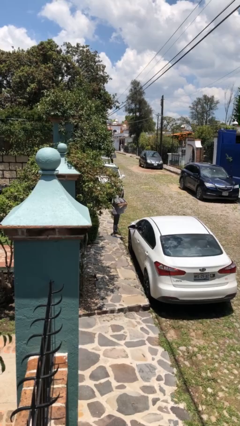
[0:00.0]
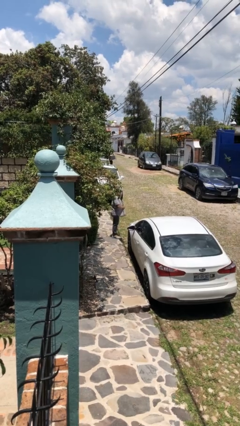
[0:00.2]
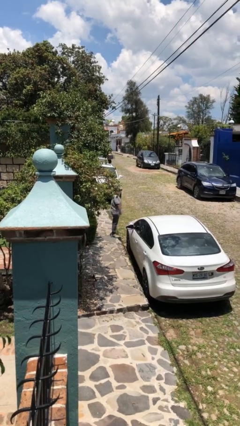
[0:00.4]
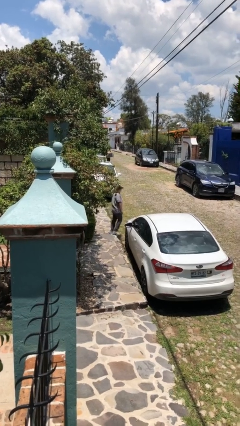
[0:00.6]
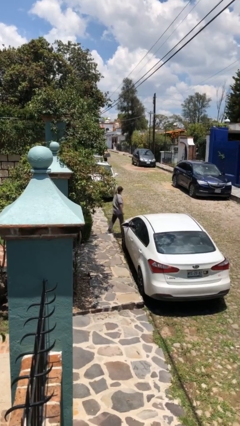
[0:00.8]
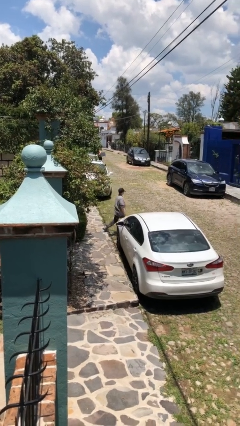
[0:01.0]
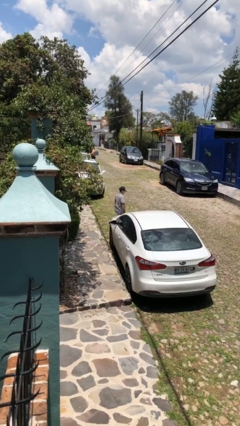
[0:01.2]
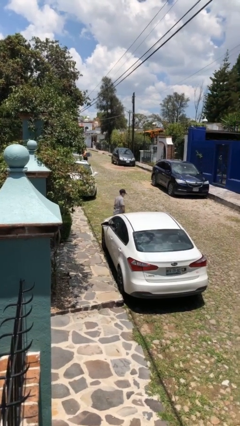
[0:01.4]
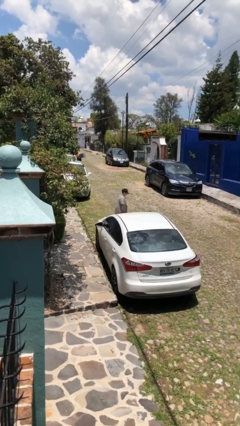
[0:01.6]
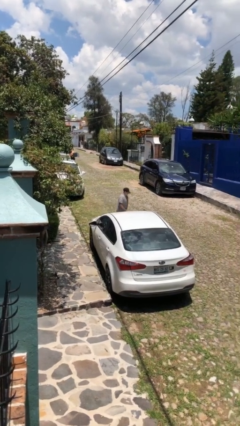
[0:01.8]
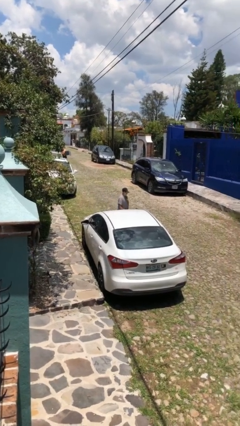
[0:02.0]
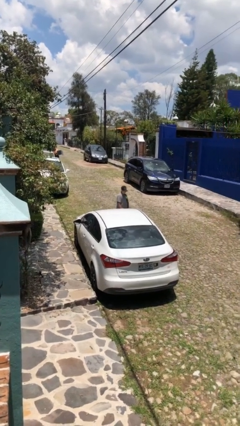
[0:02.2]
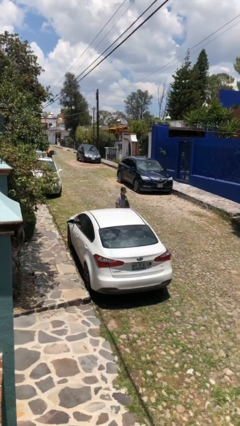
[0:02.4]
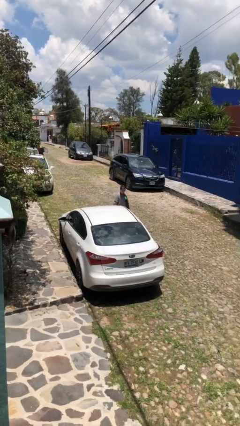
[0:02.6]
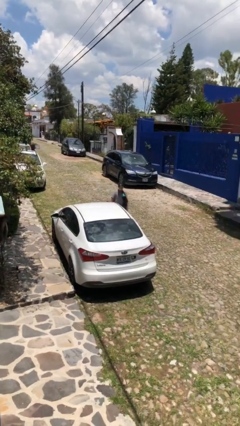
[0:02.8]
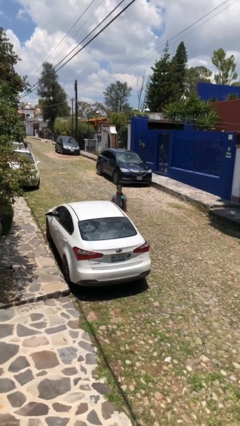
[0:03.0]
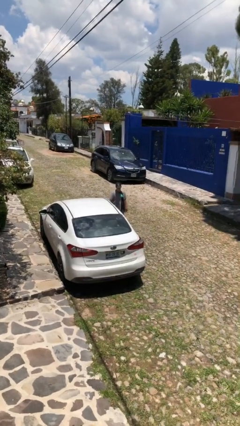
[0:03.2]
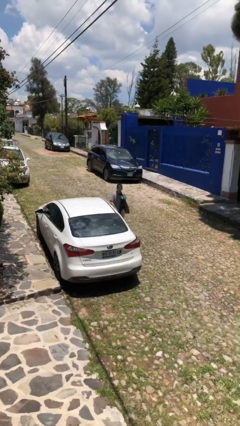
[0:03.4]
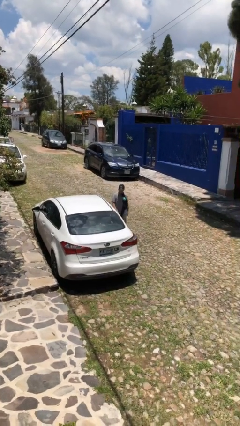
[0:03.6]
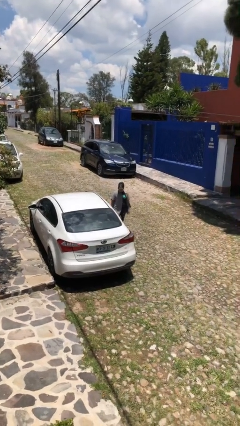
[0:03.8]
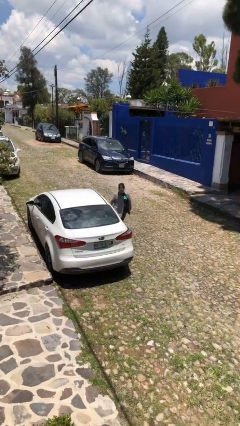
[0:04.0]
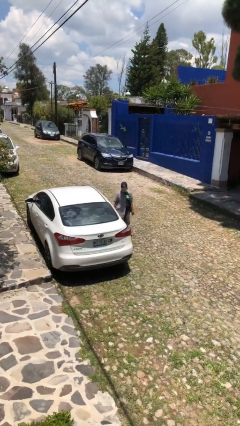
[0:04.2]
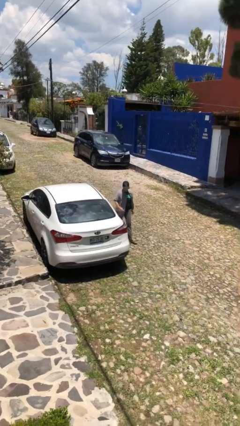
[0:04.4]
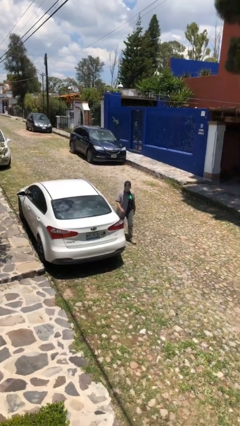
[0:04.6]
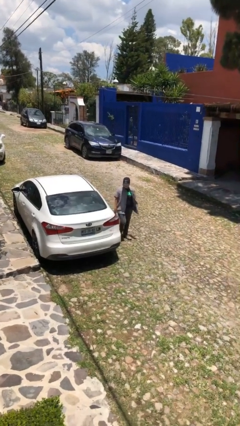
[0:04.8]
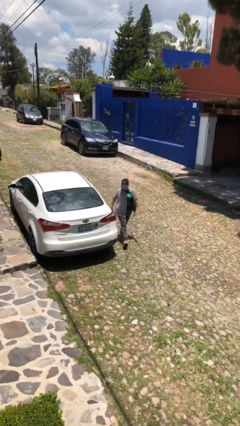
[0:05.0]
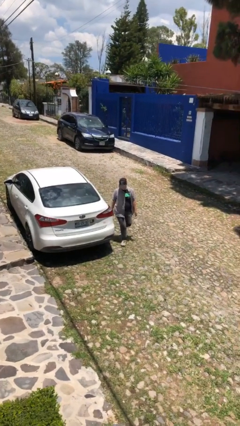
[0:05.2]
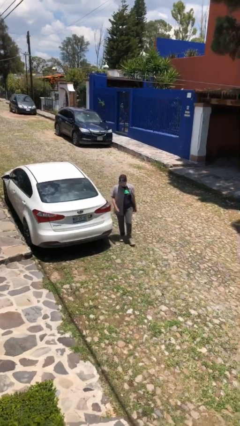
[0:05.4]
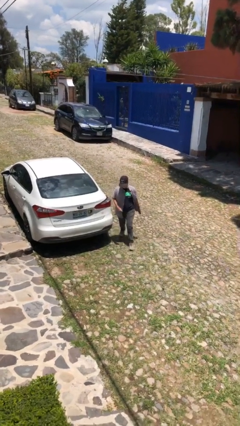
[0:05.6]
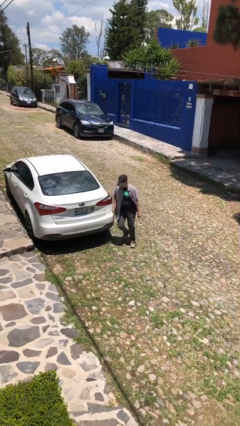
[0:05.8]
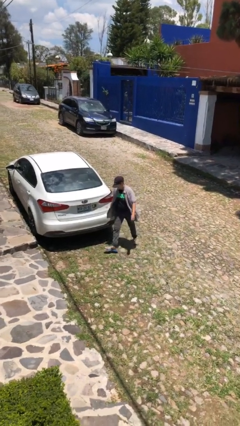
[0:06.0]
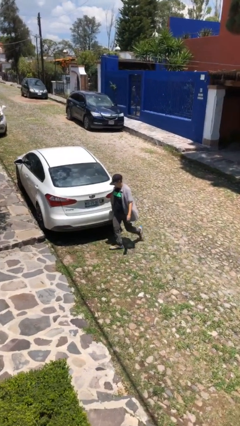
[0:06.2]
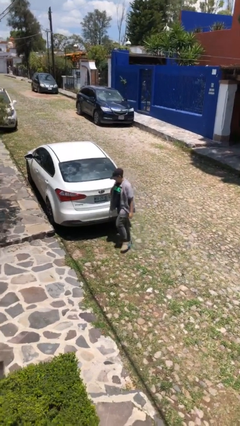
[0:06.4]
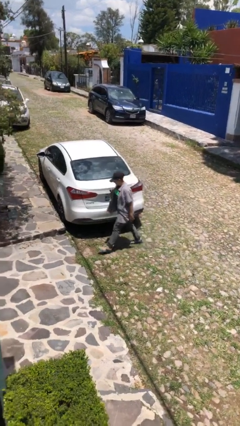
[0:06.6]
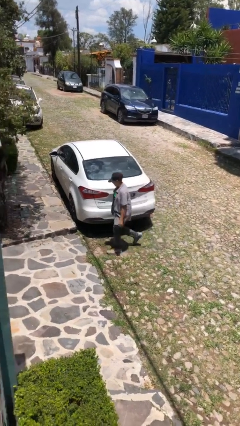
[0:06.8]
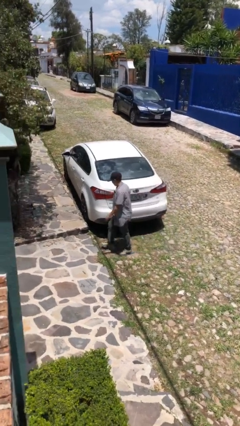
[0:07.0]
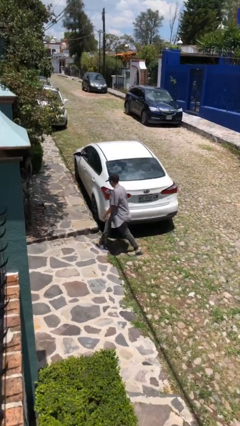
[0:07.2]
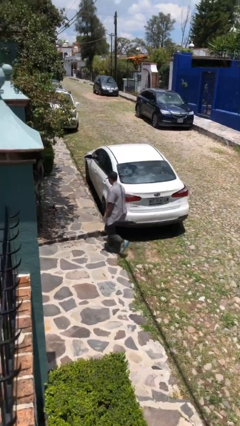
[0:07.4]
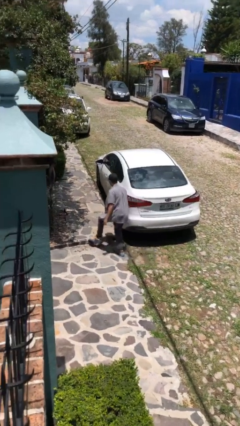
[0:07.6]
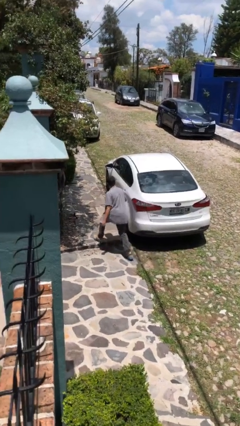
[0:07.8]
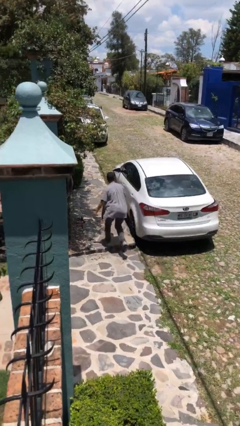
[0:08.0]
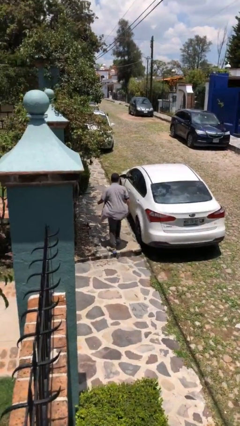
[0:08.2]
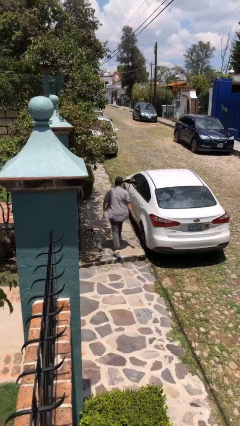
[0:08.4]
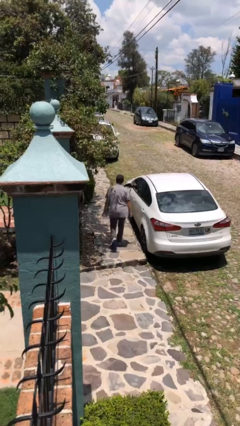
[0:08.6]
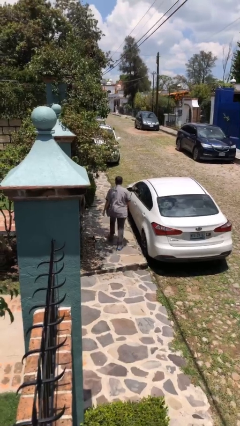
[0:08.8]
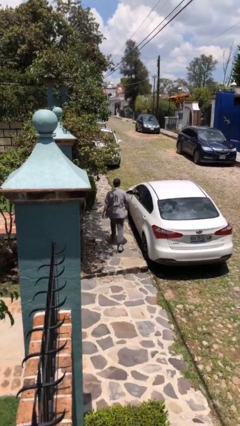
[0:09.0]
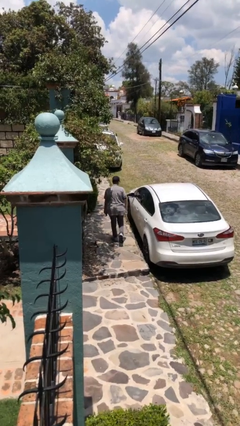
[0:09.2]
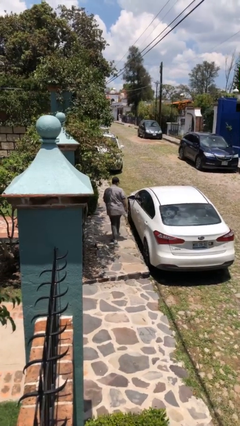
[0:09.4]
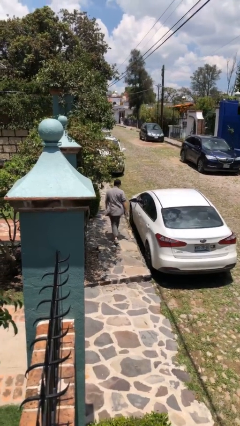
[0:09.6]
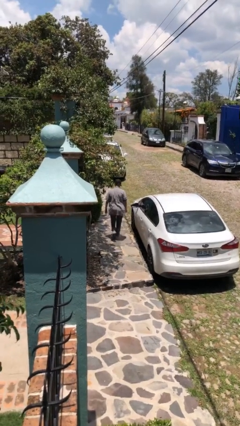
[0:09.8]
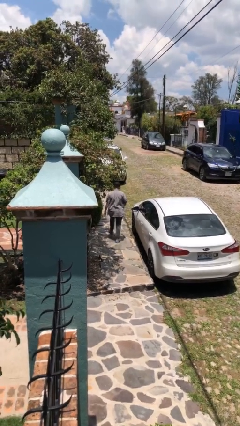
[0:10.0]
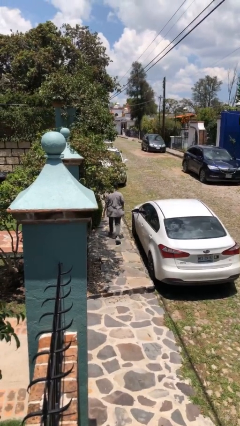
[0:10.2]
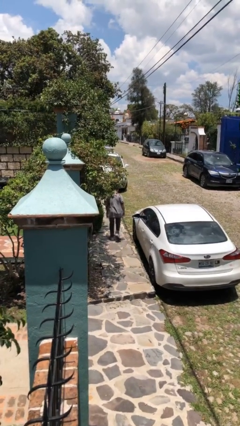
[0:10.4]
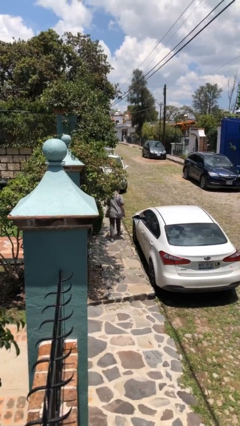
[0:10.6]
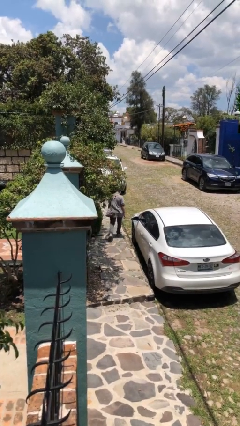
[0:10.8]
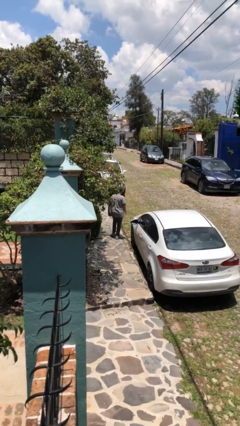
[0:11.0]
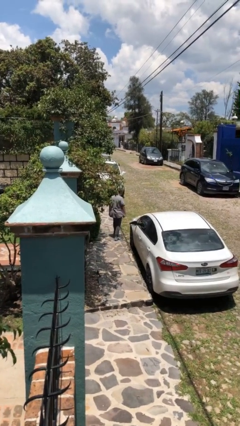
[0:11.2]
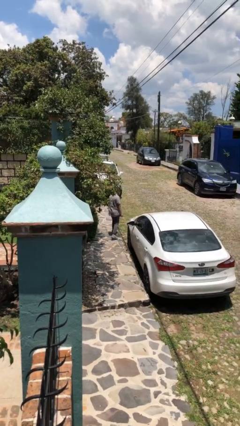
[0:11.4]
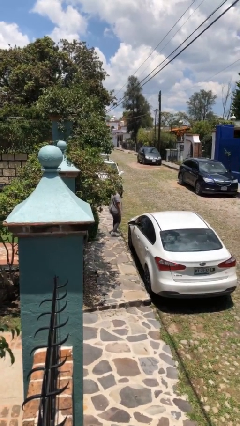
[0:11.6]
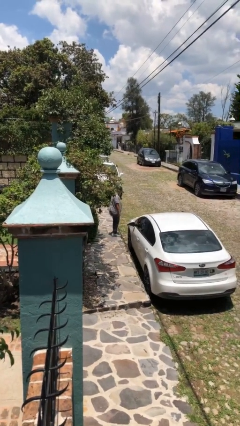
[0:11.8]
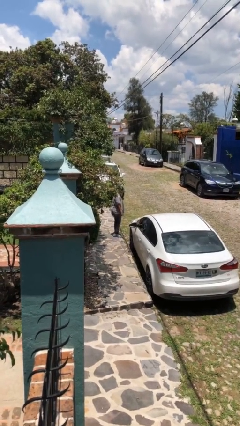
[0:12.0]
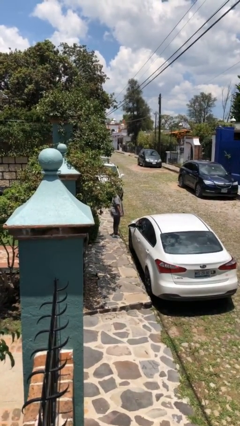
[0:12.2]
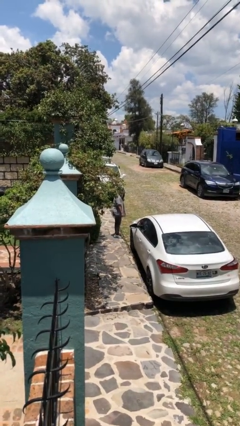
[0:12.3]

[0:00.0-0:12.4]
person walks around car

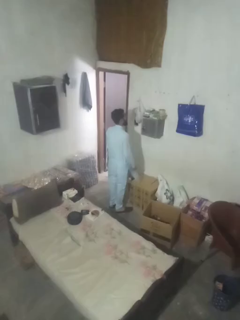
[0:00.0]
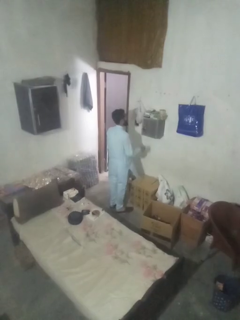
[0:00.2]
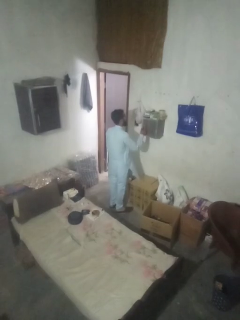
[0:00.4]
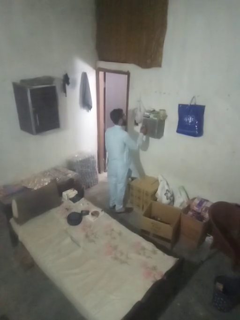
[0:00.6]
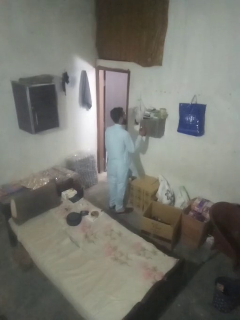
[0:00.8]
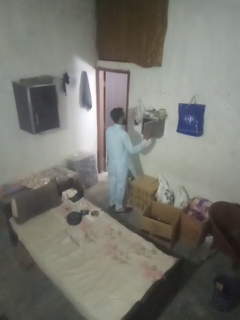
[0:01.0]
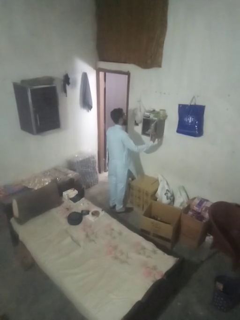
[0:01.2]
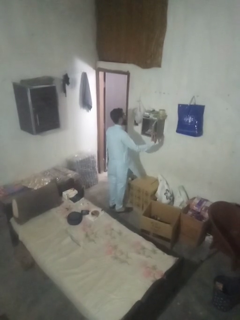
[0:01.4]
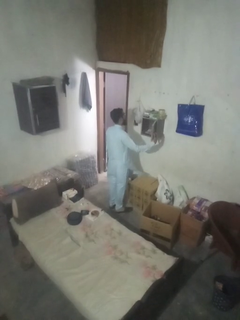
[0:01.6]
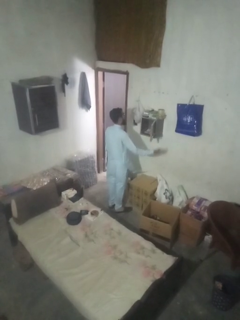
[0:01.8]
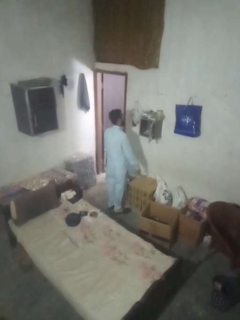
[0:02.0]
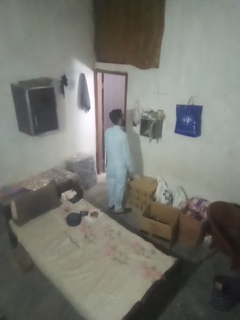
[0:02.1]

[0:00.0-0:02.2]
person opens mailbox

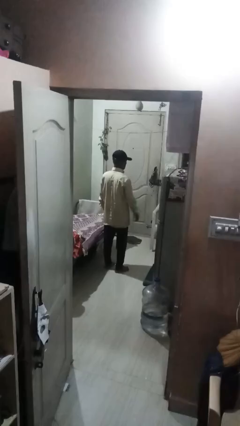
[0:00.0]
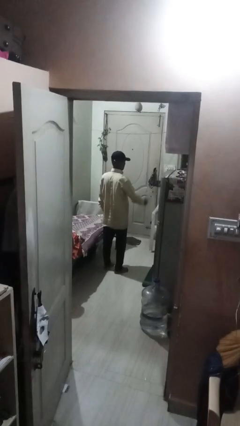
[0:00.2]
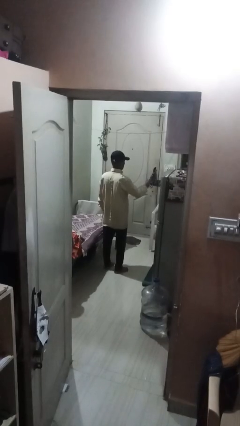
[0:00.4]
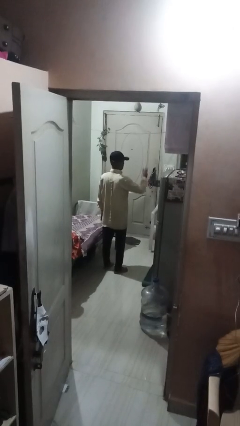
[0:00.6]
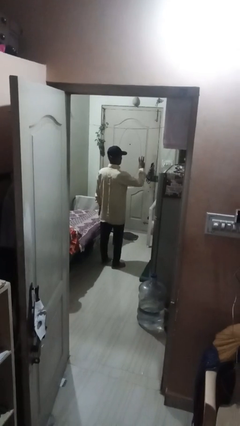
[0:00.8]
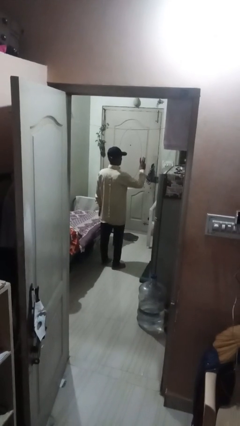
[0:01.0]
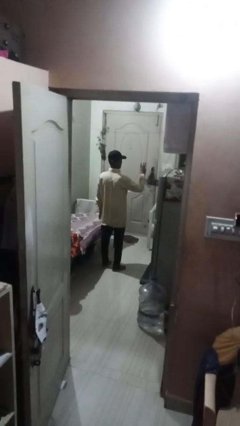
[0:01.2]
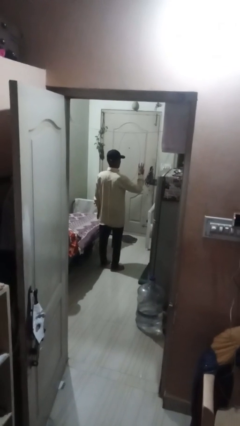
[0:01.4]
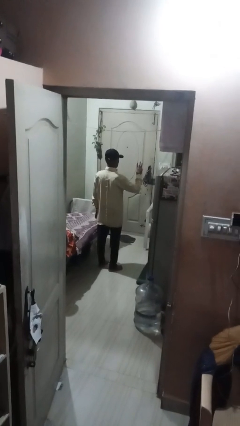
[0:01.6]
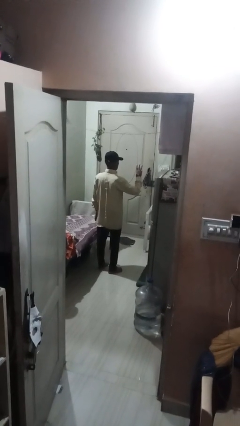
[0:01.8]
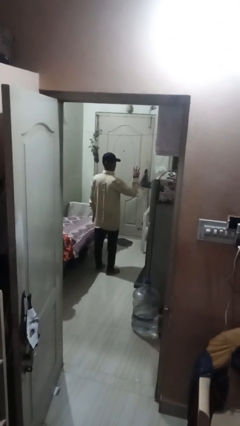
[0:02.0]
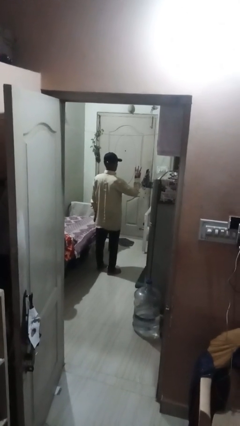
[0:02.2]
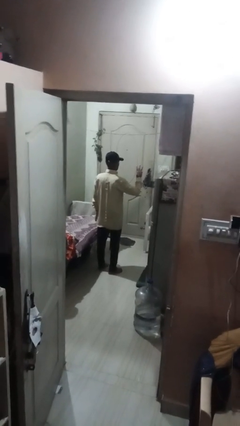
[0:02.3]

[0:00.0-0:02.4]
person gestures number three

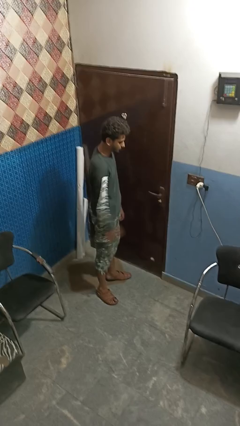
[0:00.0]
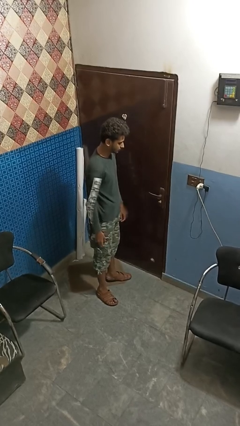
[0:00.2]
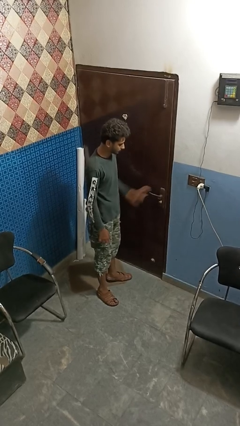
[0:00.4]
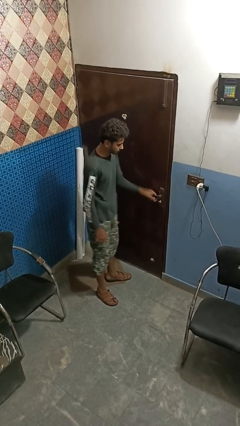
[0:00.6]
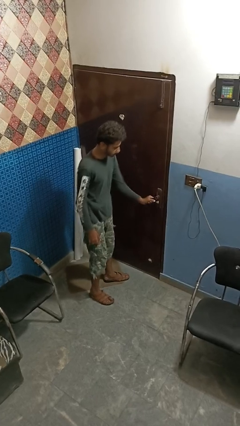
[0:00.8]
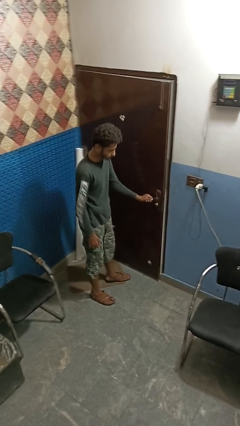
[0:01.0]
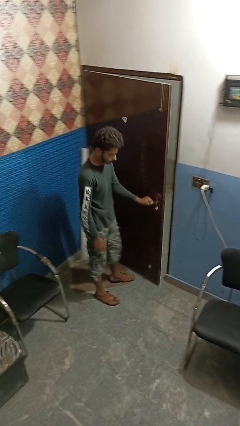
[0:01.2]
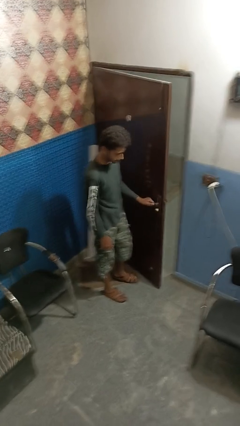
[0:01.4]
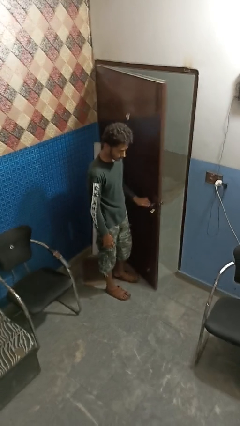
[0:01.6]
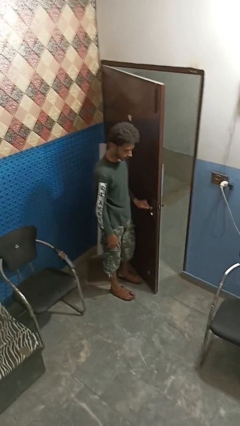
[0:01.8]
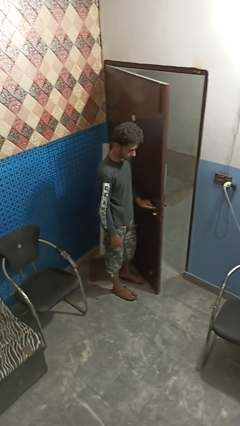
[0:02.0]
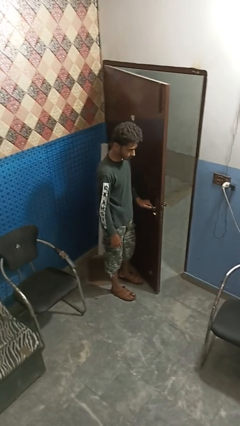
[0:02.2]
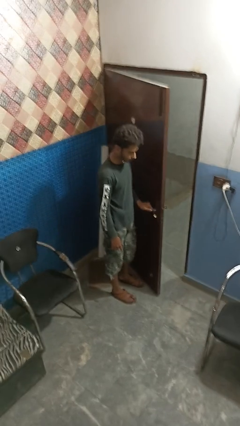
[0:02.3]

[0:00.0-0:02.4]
person opens facility door
